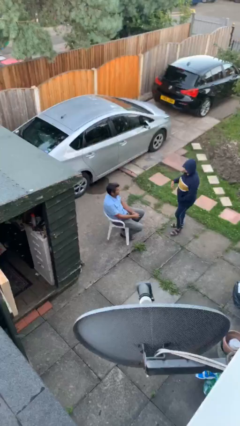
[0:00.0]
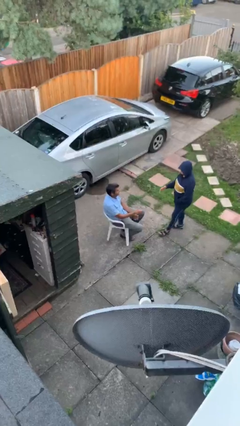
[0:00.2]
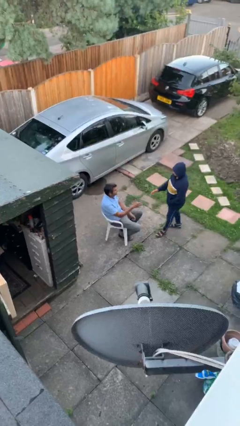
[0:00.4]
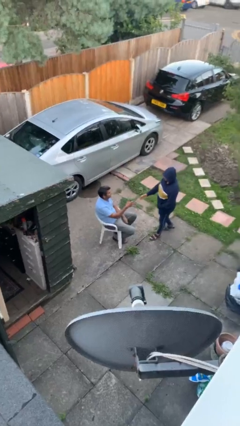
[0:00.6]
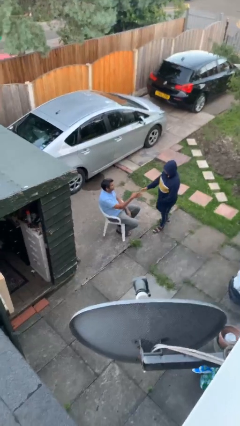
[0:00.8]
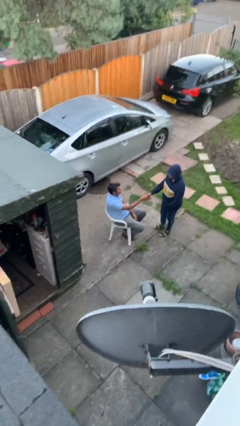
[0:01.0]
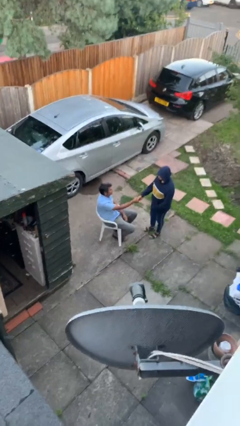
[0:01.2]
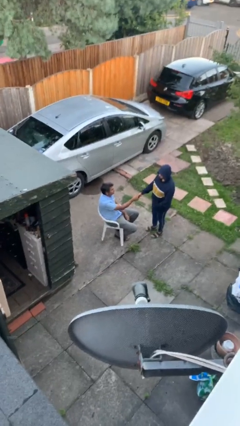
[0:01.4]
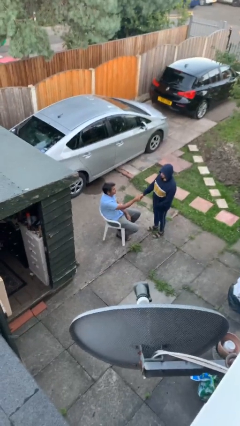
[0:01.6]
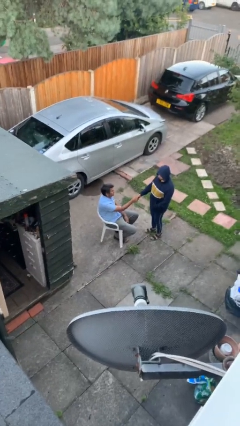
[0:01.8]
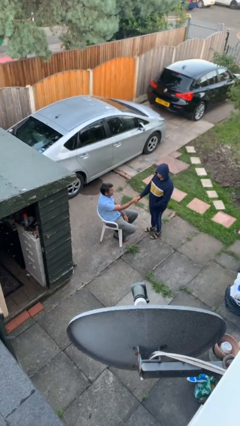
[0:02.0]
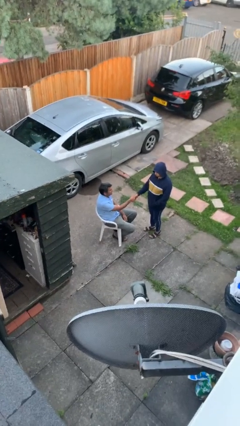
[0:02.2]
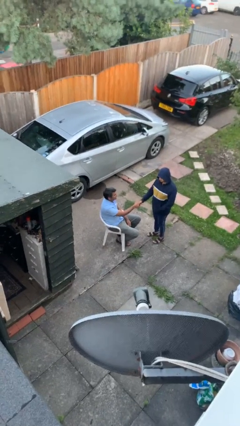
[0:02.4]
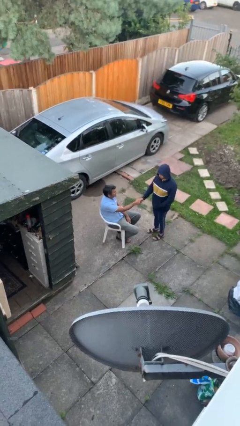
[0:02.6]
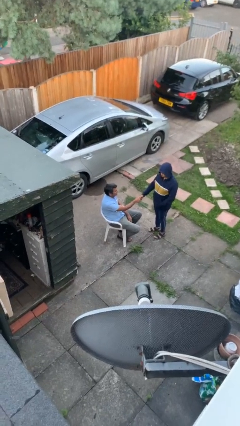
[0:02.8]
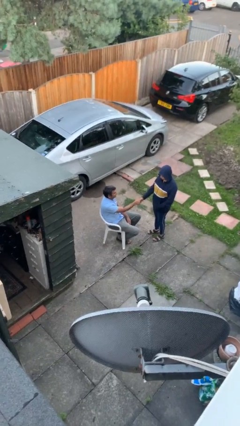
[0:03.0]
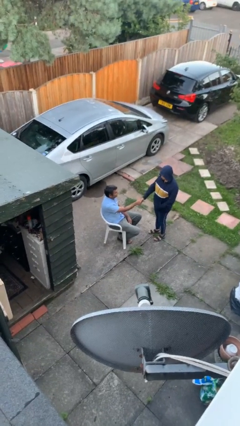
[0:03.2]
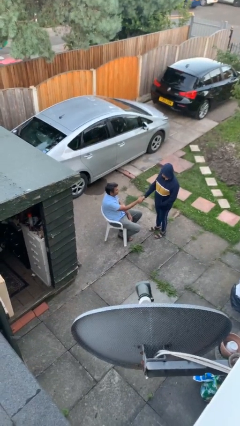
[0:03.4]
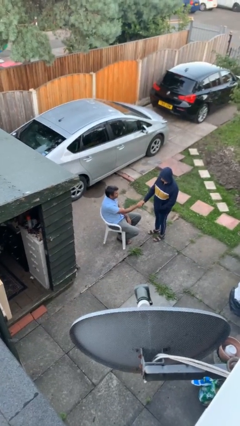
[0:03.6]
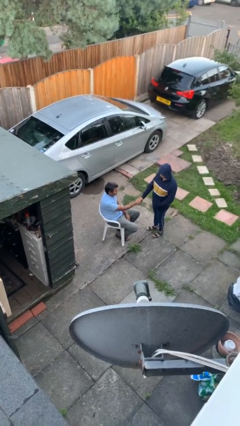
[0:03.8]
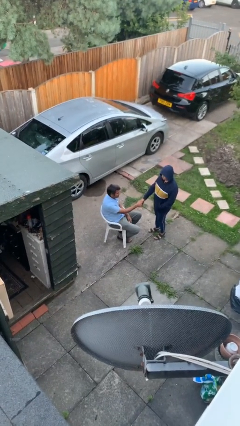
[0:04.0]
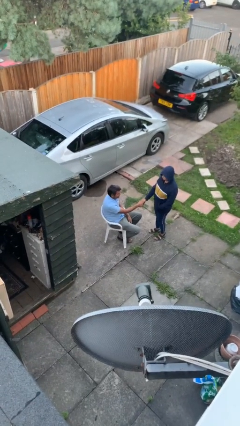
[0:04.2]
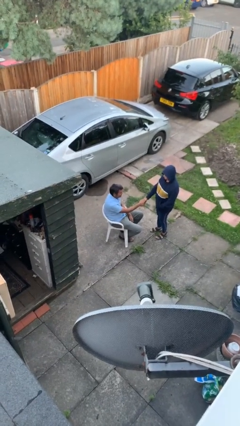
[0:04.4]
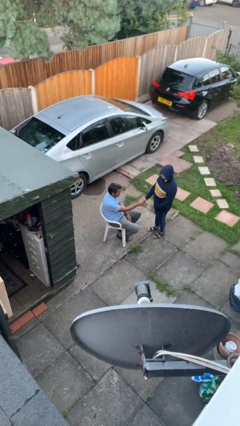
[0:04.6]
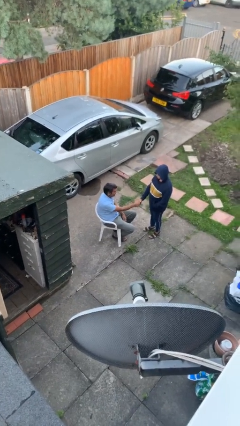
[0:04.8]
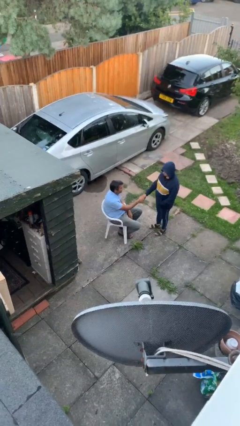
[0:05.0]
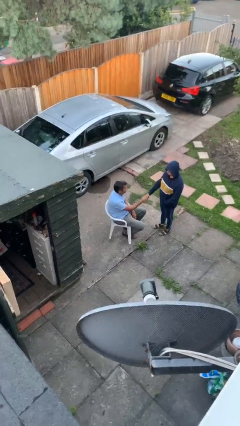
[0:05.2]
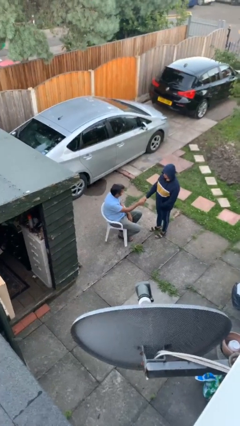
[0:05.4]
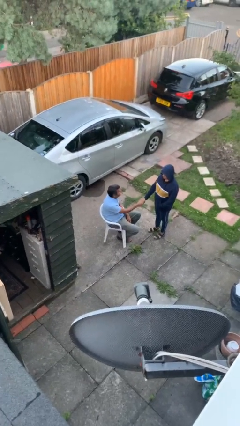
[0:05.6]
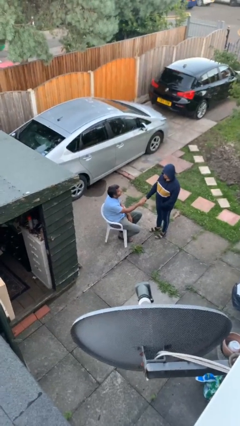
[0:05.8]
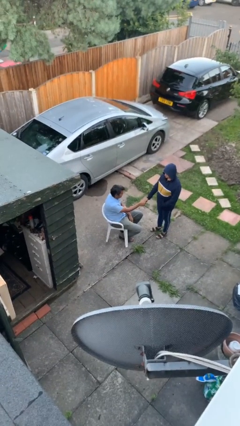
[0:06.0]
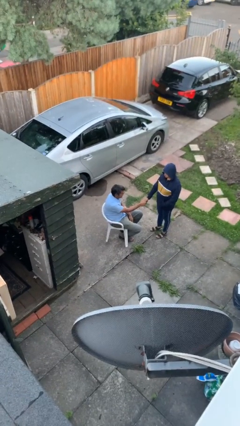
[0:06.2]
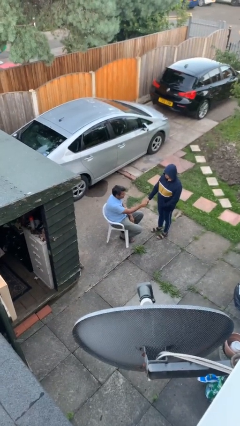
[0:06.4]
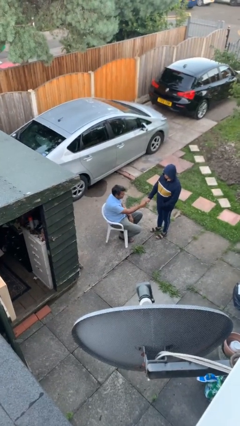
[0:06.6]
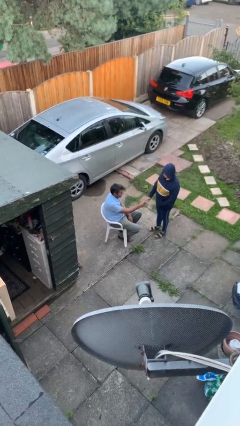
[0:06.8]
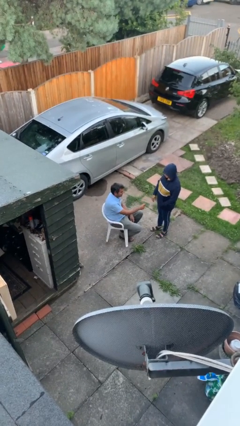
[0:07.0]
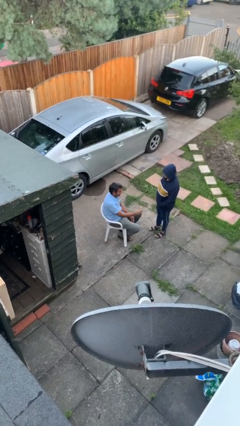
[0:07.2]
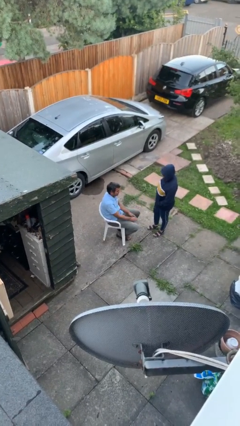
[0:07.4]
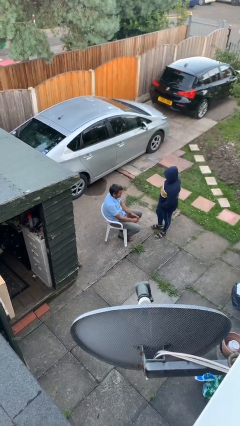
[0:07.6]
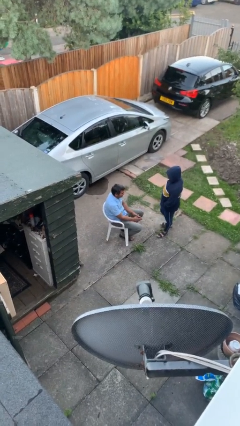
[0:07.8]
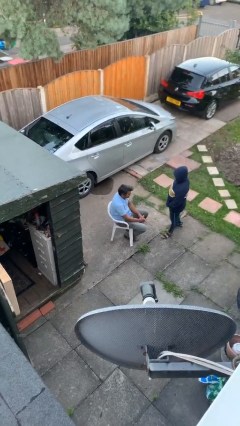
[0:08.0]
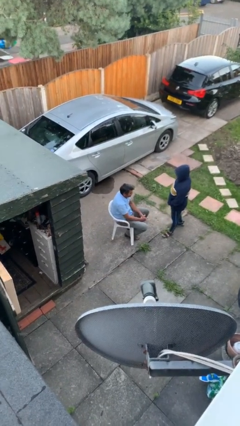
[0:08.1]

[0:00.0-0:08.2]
person shakes hand

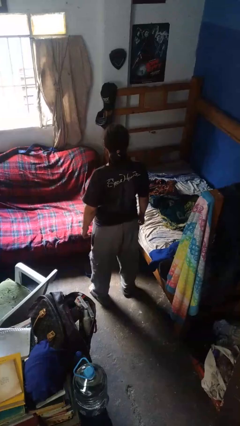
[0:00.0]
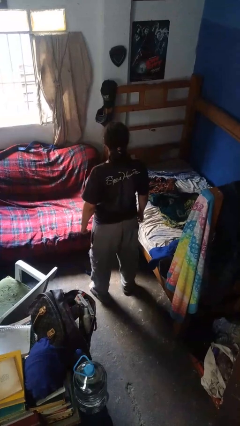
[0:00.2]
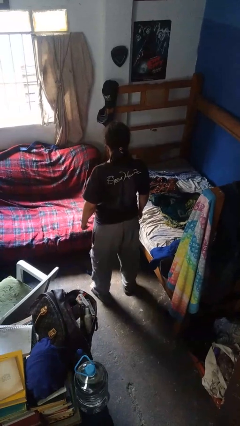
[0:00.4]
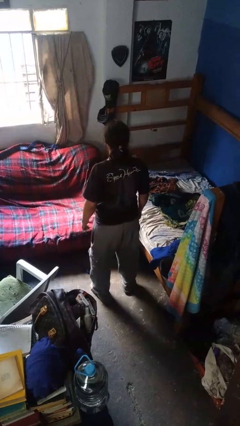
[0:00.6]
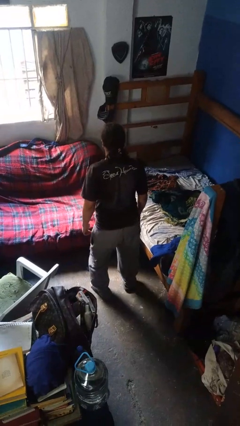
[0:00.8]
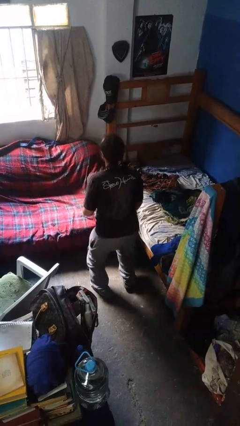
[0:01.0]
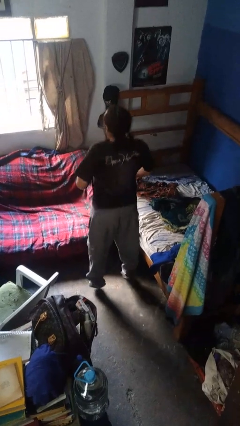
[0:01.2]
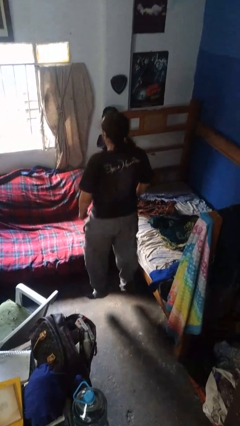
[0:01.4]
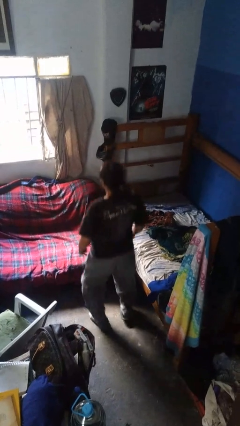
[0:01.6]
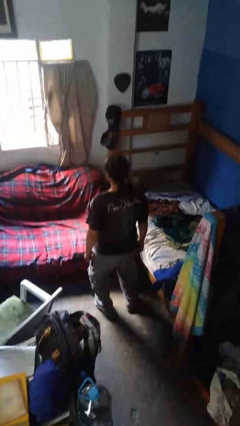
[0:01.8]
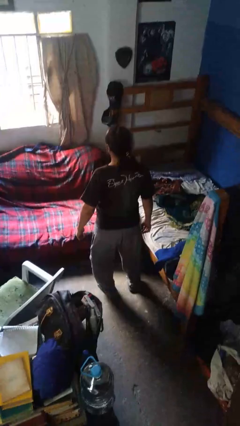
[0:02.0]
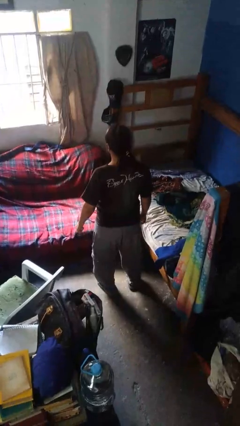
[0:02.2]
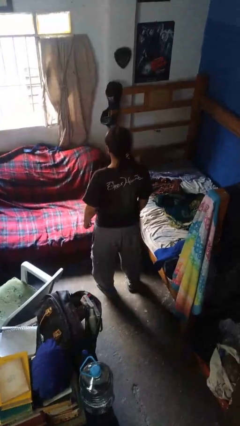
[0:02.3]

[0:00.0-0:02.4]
person jumps

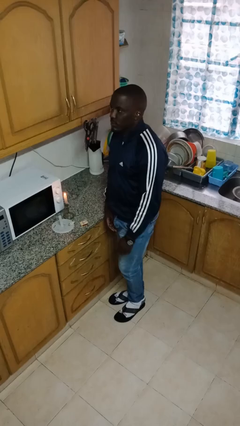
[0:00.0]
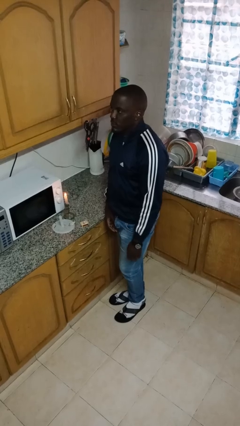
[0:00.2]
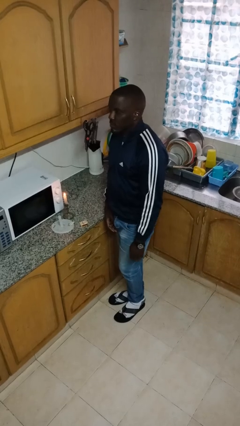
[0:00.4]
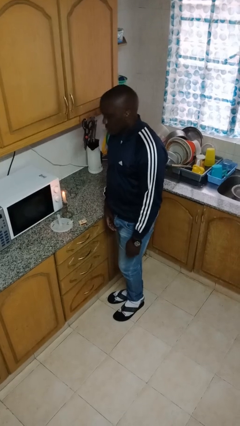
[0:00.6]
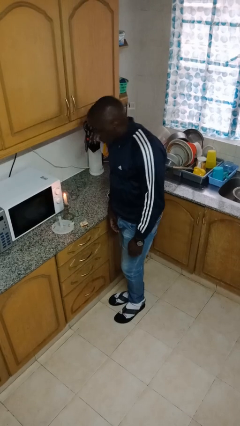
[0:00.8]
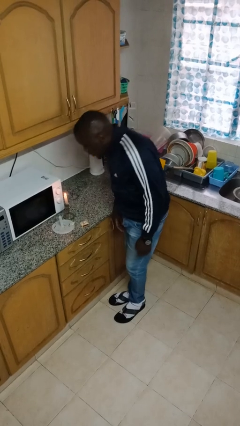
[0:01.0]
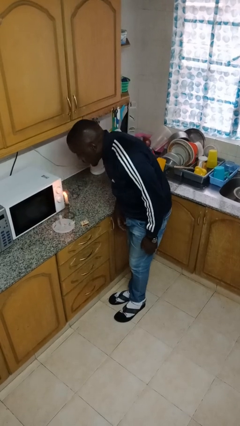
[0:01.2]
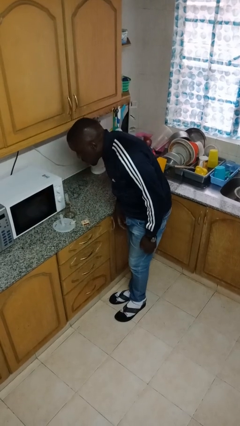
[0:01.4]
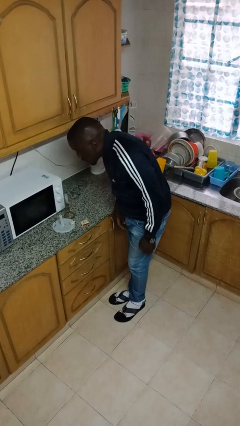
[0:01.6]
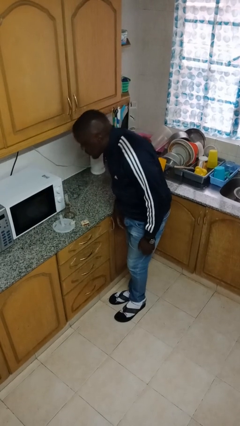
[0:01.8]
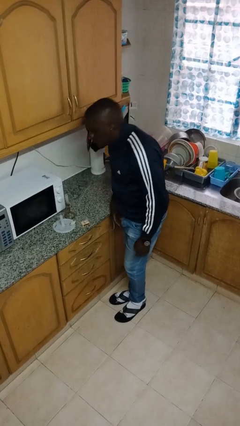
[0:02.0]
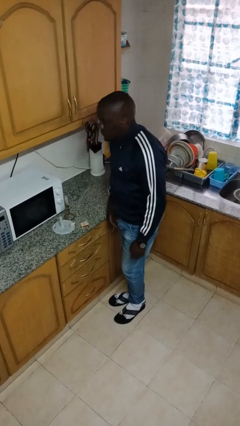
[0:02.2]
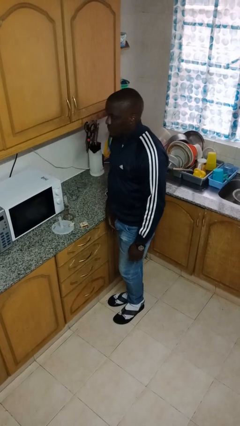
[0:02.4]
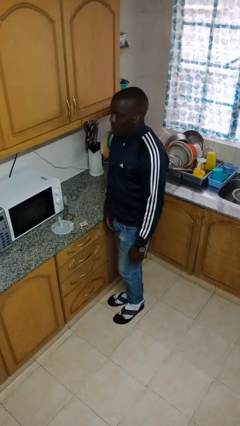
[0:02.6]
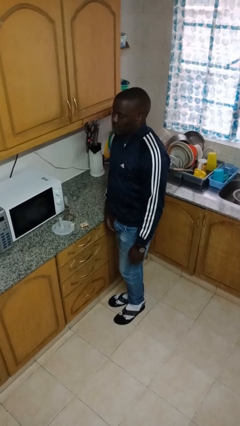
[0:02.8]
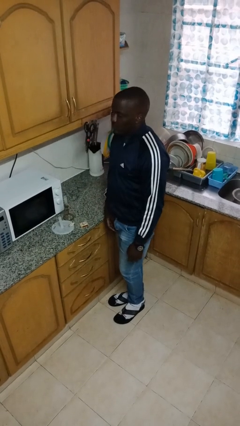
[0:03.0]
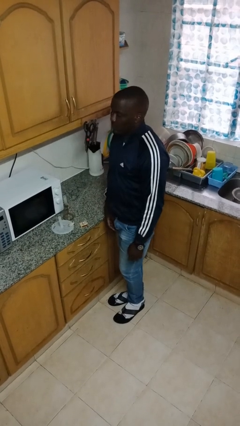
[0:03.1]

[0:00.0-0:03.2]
person extinguishes candle

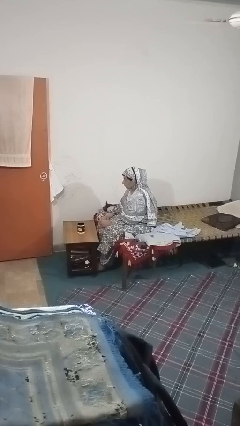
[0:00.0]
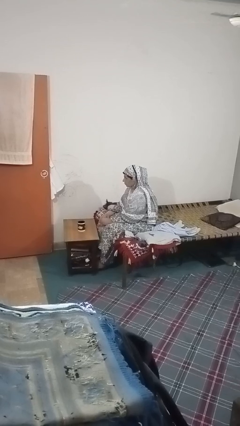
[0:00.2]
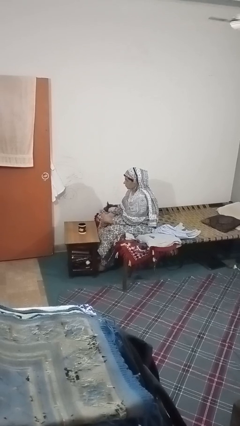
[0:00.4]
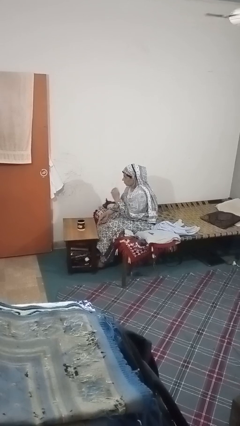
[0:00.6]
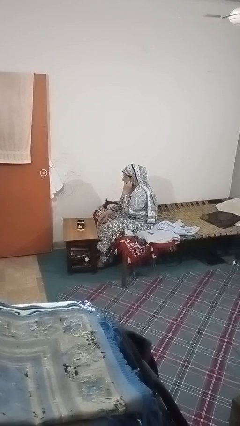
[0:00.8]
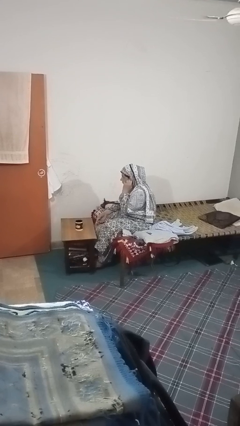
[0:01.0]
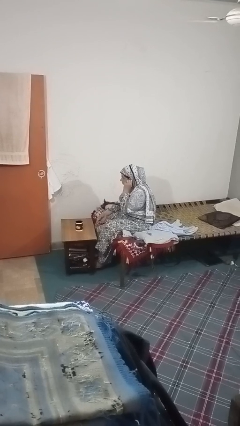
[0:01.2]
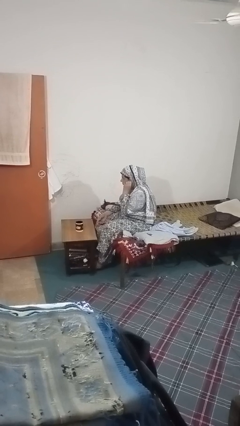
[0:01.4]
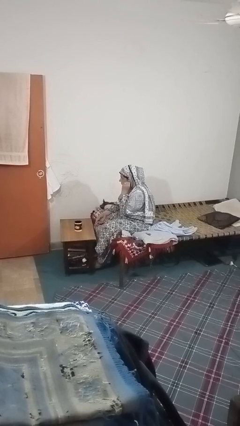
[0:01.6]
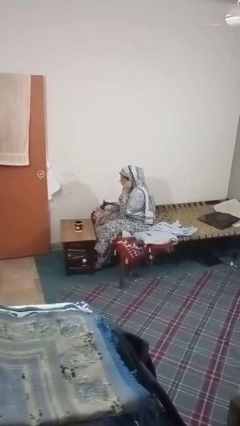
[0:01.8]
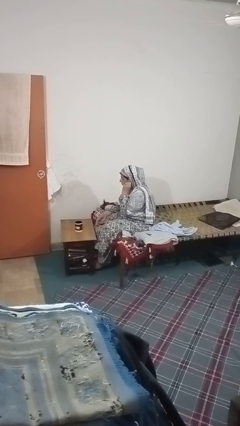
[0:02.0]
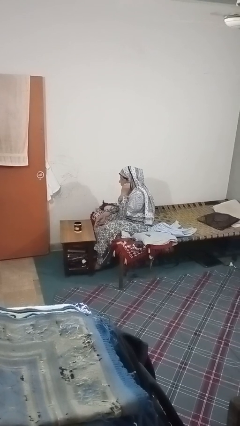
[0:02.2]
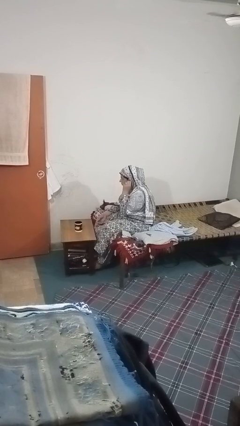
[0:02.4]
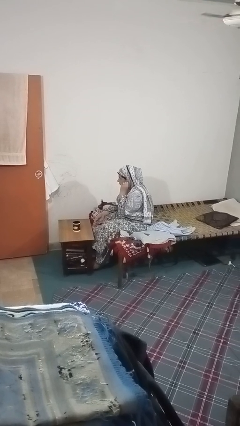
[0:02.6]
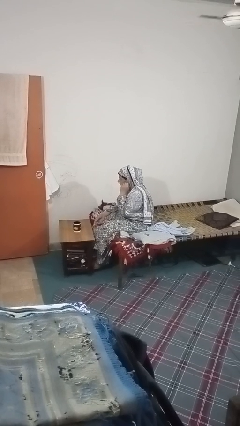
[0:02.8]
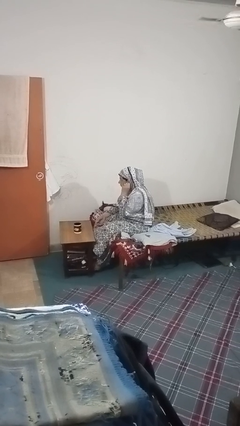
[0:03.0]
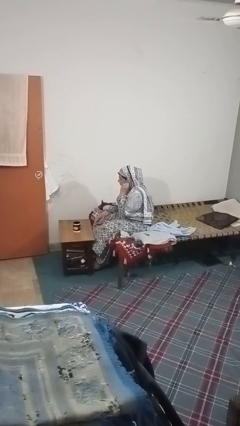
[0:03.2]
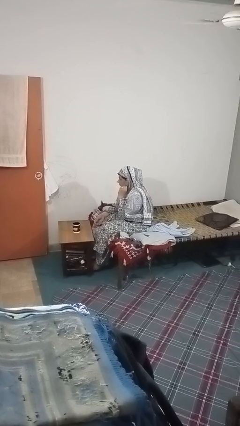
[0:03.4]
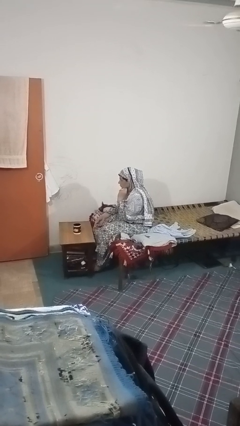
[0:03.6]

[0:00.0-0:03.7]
person touches earlobe

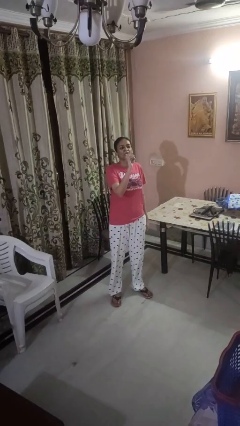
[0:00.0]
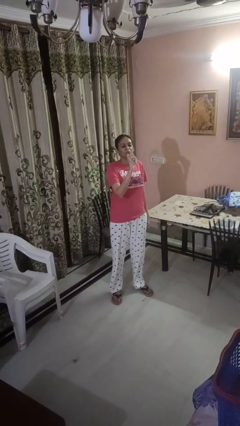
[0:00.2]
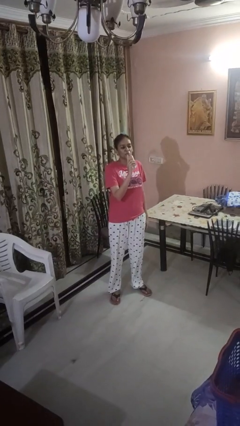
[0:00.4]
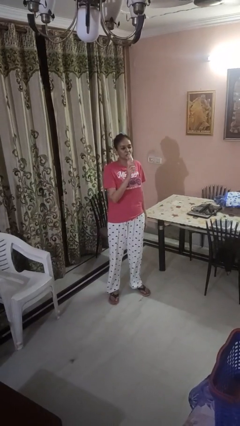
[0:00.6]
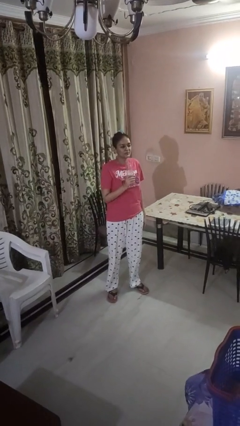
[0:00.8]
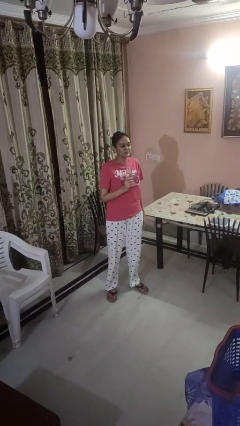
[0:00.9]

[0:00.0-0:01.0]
person drinks from bottle
